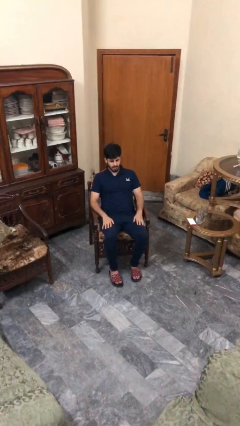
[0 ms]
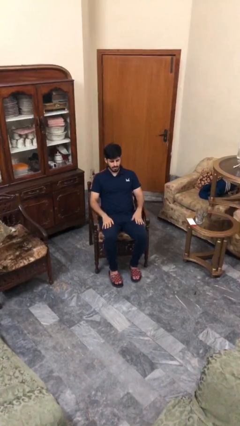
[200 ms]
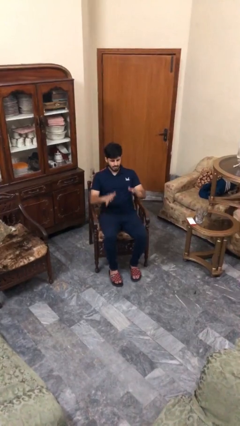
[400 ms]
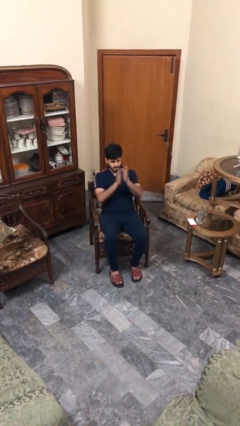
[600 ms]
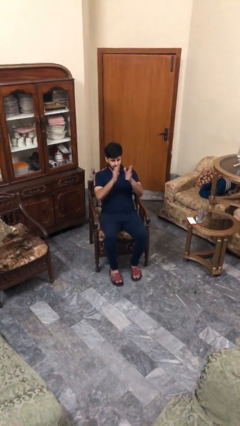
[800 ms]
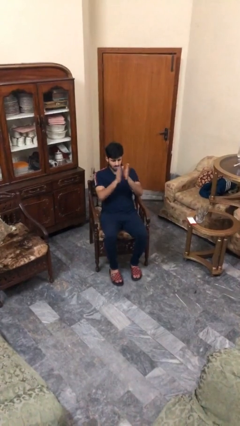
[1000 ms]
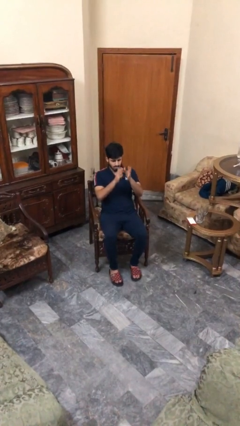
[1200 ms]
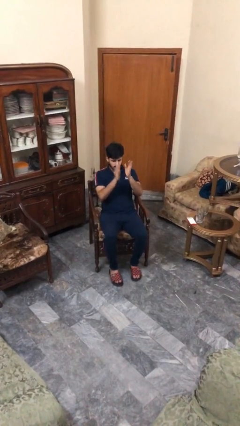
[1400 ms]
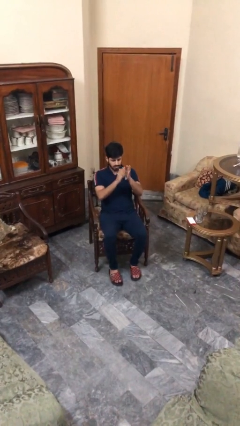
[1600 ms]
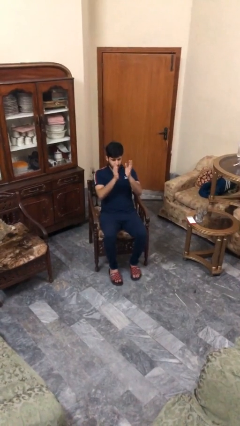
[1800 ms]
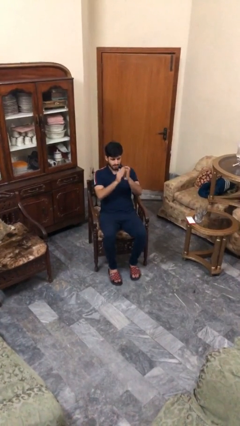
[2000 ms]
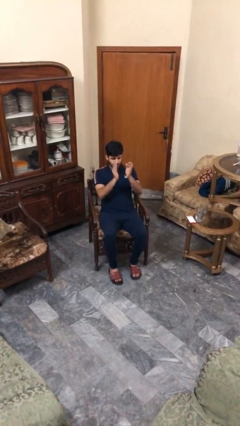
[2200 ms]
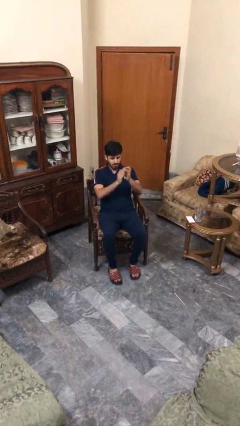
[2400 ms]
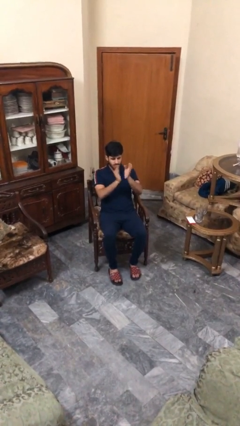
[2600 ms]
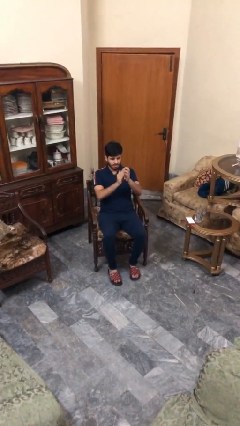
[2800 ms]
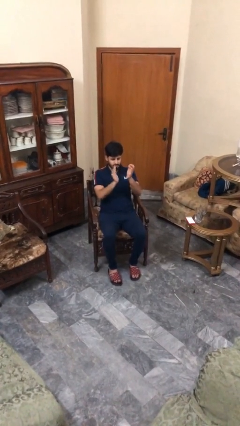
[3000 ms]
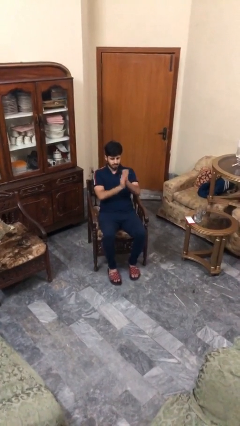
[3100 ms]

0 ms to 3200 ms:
person claps hands

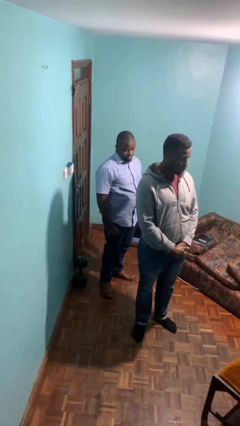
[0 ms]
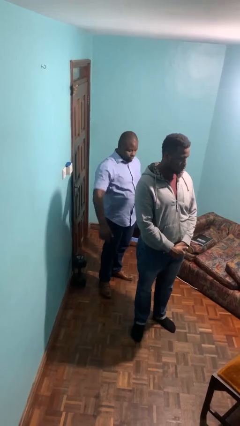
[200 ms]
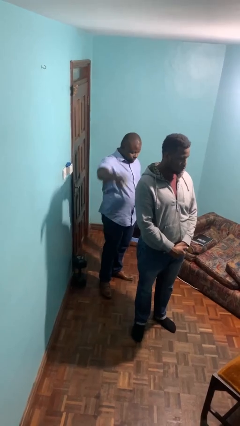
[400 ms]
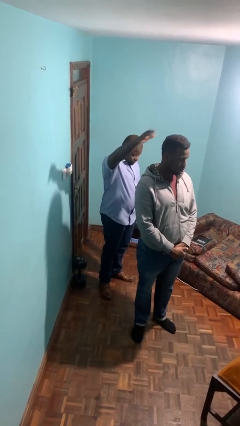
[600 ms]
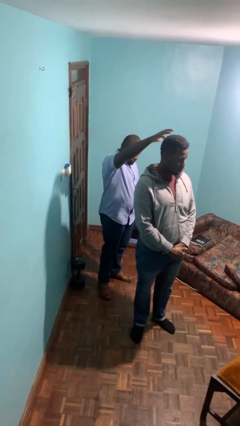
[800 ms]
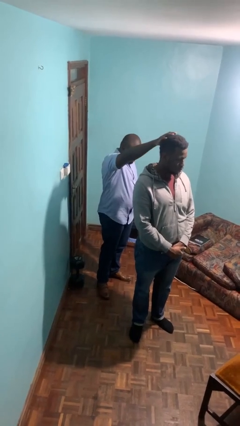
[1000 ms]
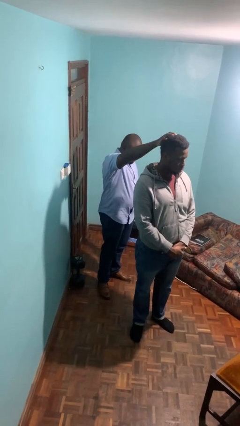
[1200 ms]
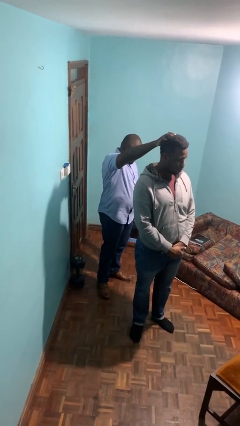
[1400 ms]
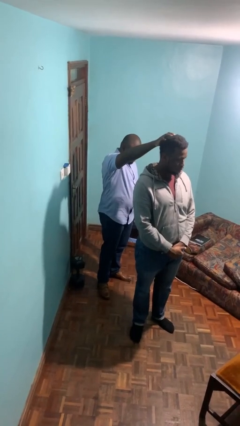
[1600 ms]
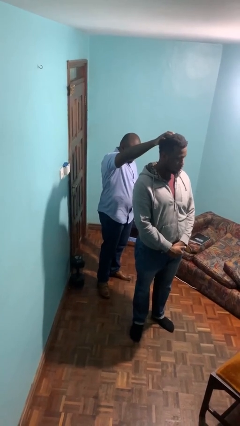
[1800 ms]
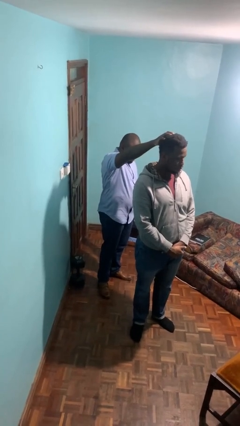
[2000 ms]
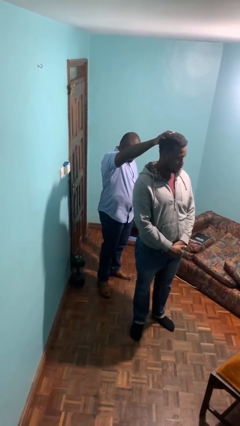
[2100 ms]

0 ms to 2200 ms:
person grabs person by hair

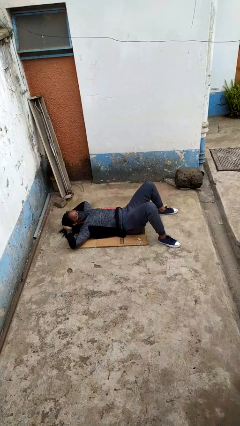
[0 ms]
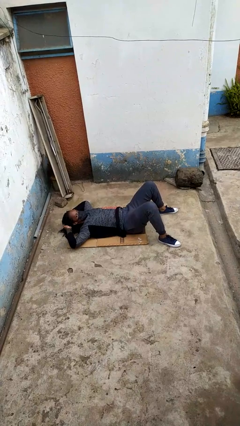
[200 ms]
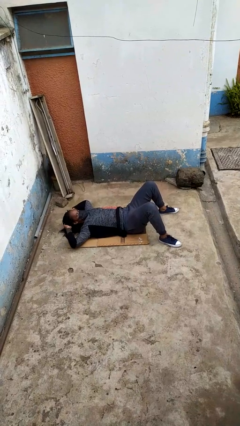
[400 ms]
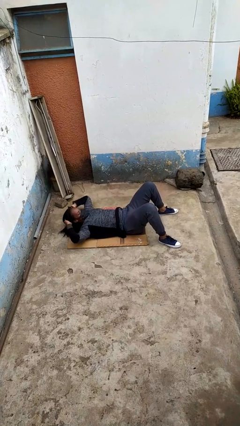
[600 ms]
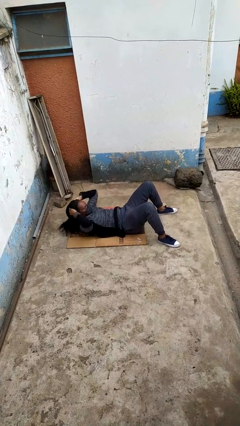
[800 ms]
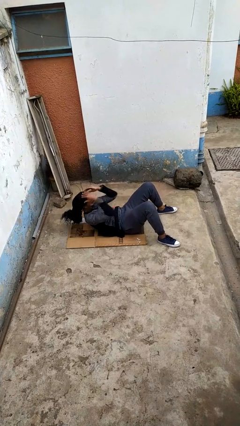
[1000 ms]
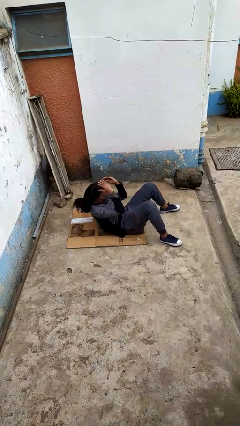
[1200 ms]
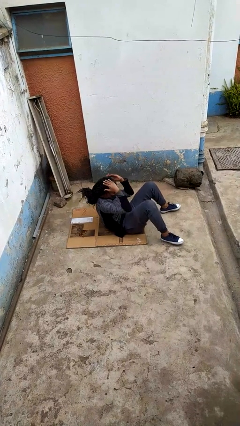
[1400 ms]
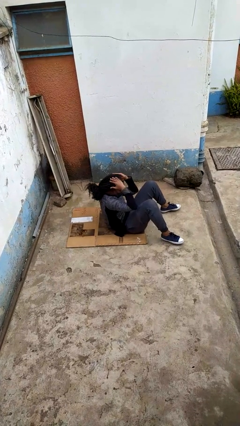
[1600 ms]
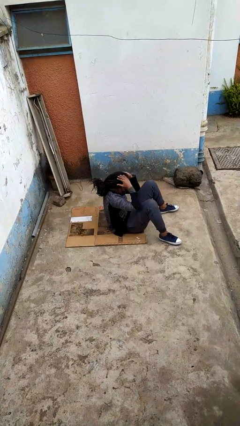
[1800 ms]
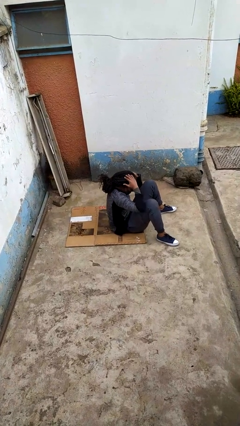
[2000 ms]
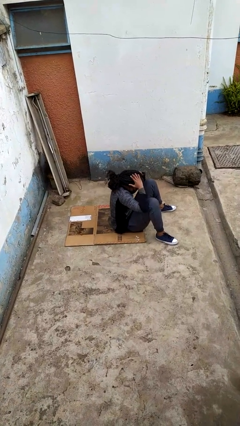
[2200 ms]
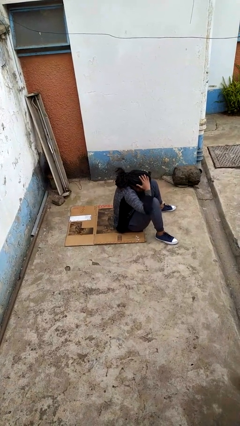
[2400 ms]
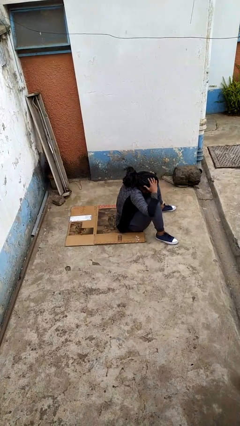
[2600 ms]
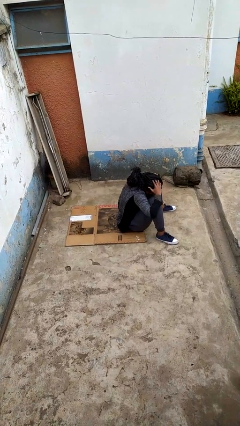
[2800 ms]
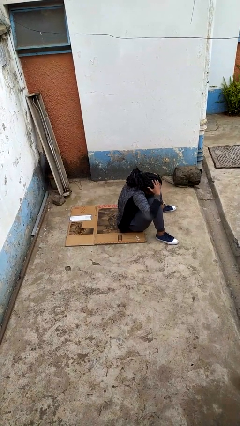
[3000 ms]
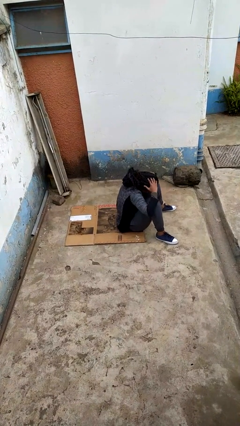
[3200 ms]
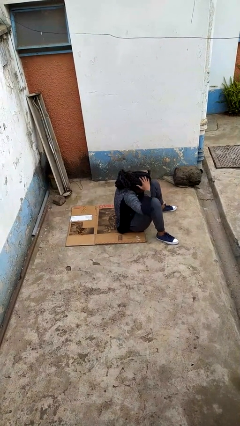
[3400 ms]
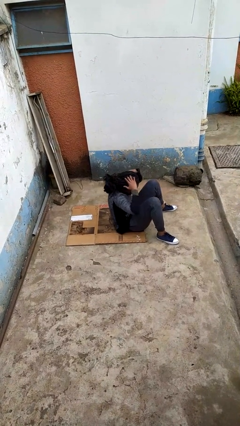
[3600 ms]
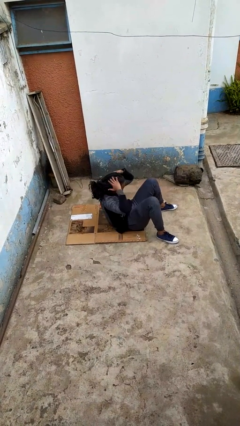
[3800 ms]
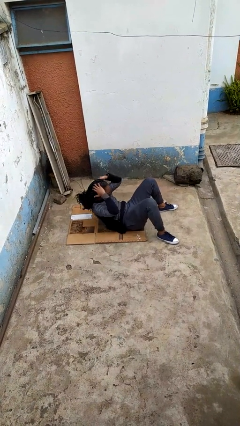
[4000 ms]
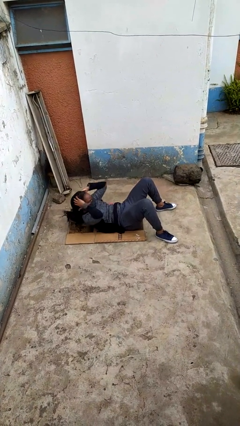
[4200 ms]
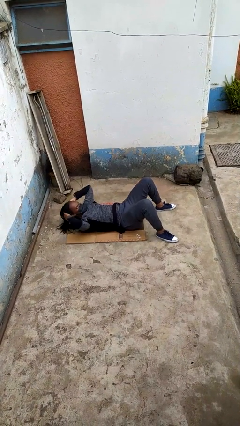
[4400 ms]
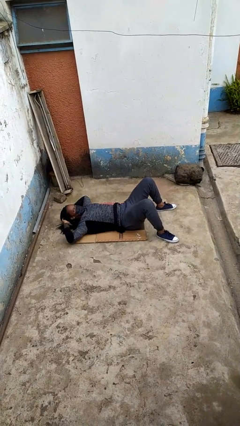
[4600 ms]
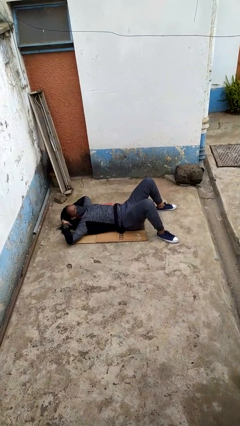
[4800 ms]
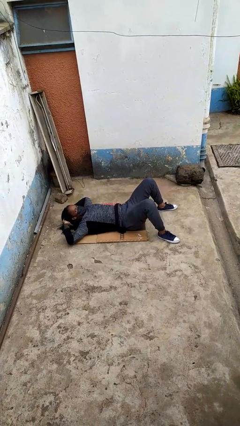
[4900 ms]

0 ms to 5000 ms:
person exercises with situp

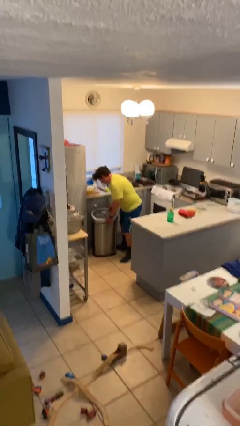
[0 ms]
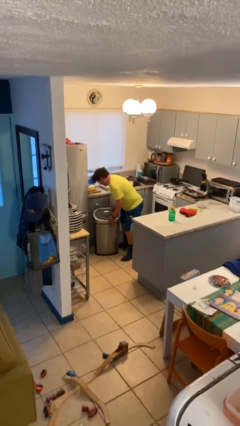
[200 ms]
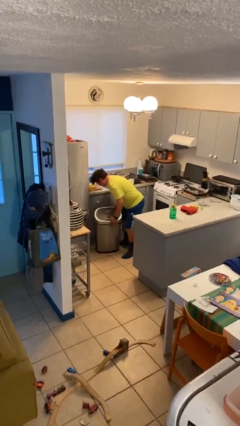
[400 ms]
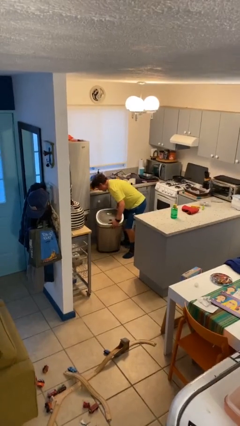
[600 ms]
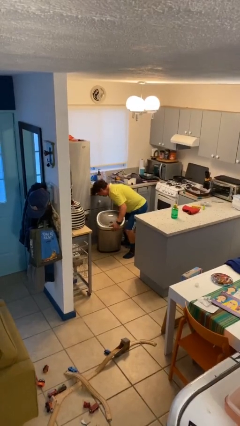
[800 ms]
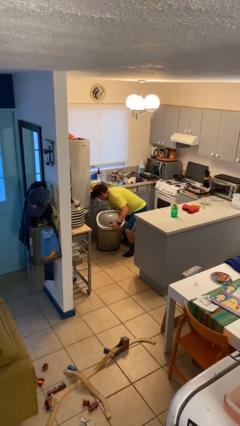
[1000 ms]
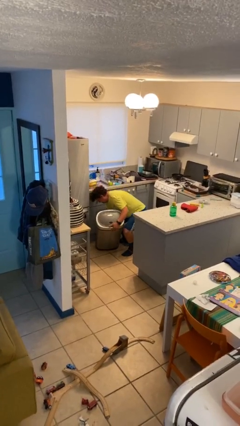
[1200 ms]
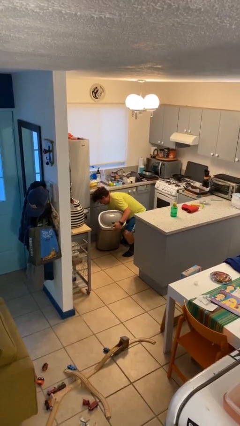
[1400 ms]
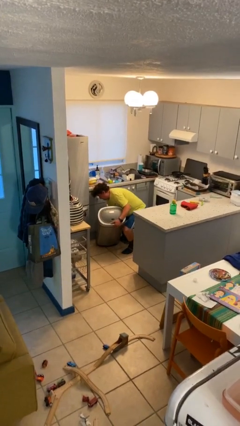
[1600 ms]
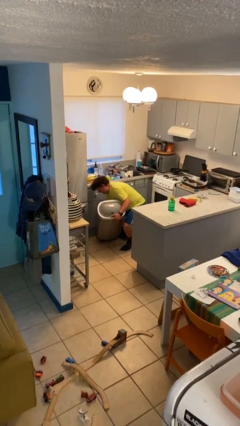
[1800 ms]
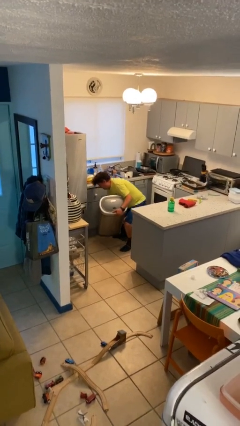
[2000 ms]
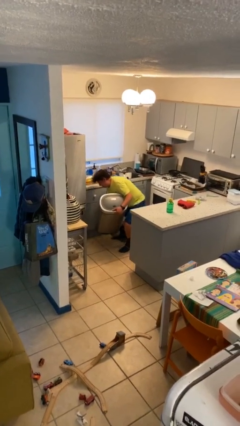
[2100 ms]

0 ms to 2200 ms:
person picks up object from floor

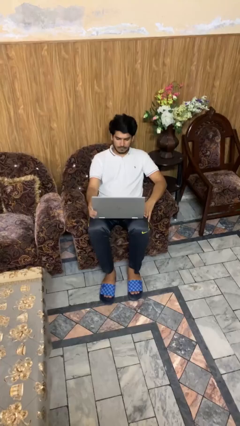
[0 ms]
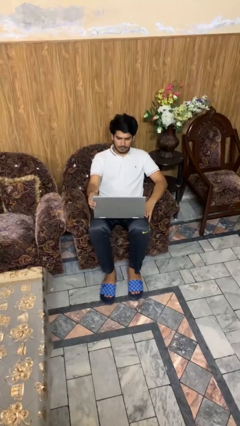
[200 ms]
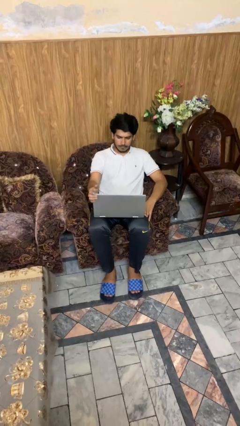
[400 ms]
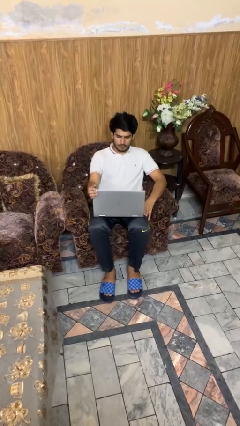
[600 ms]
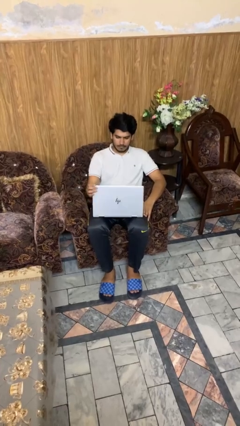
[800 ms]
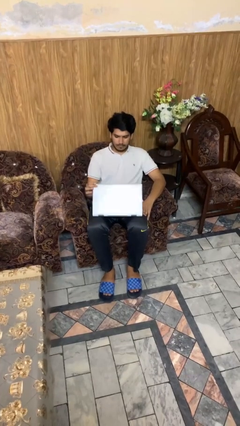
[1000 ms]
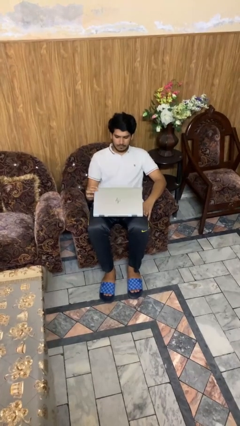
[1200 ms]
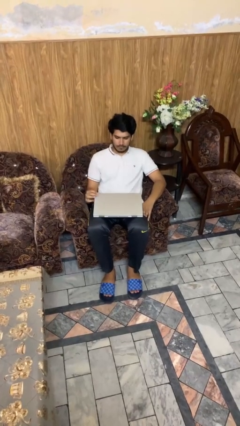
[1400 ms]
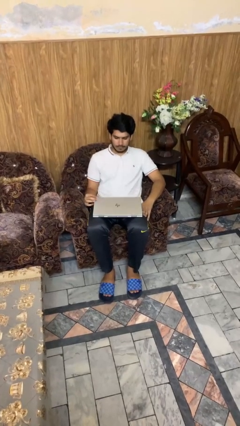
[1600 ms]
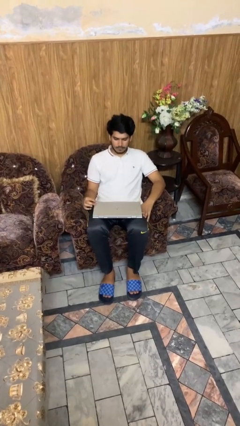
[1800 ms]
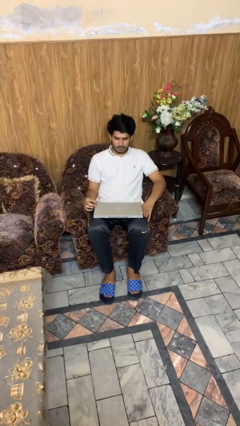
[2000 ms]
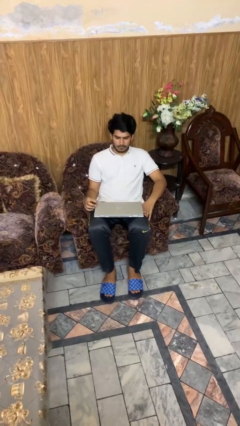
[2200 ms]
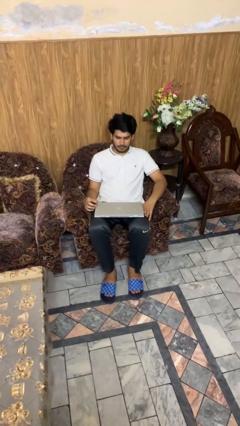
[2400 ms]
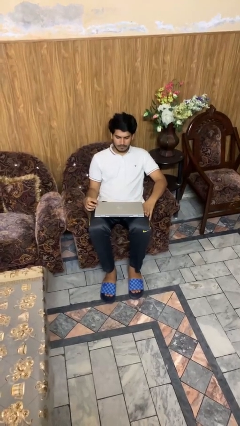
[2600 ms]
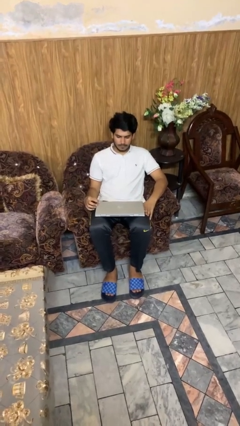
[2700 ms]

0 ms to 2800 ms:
person closes laptop

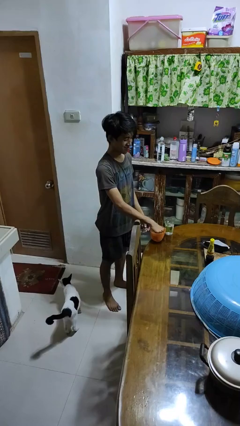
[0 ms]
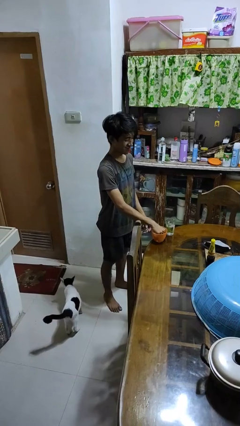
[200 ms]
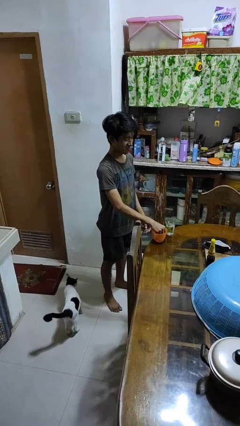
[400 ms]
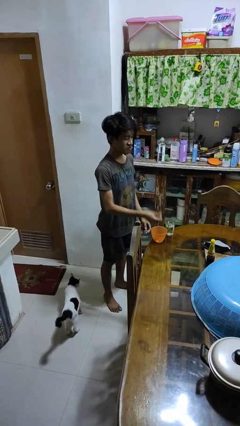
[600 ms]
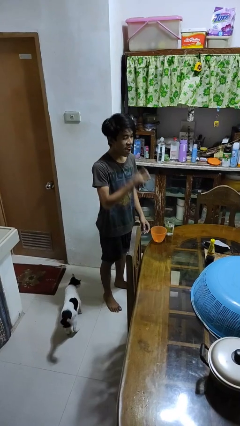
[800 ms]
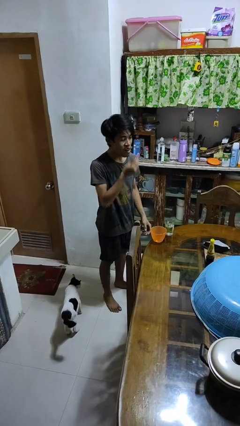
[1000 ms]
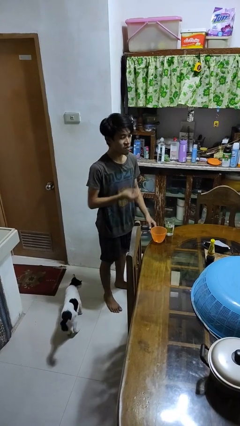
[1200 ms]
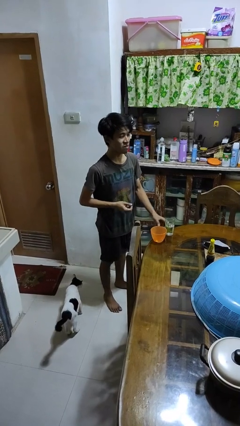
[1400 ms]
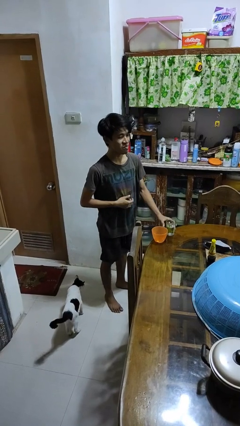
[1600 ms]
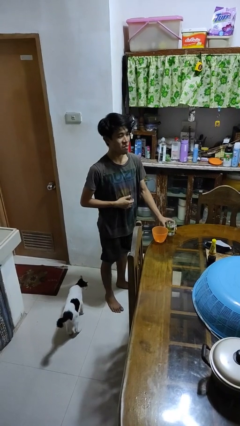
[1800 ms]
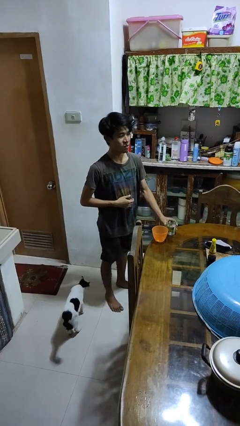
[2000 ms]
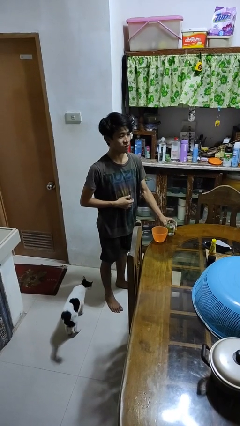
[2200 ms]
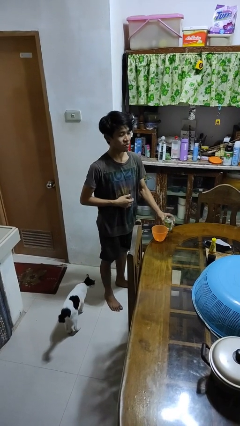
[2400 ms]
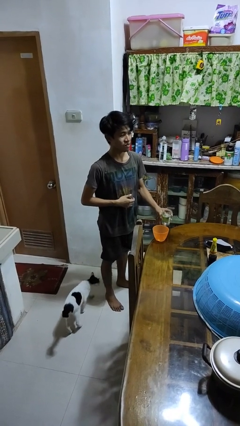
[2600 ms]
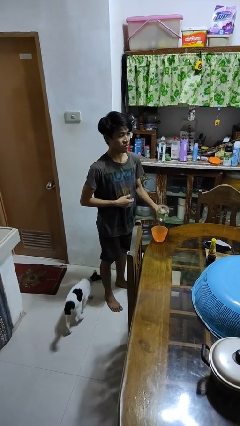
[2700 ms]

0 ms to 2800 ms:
person takes medicine pills
